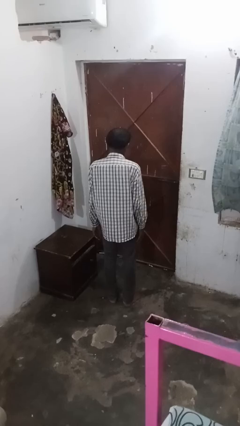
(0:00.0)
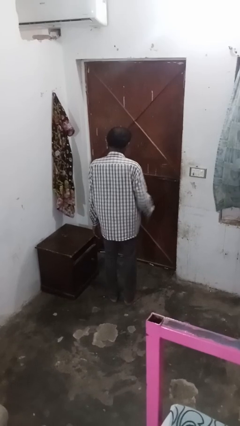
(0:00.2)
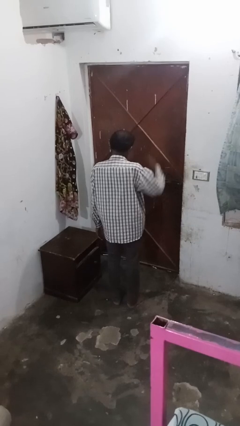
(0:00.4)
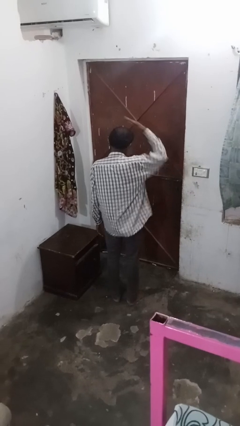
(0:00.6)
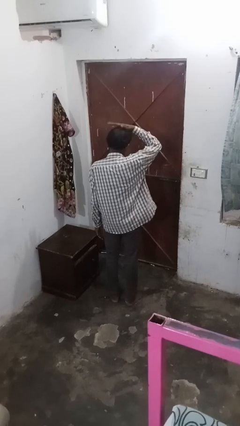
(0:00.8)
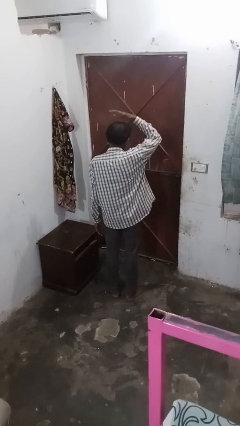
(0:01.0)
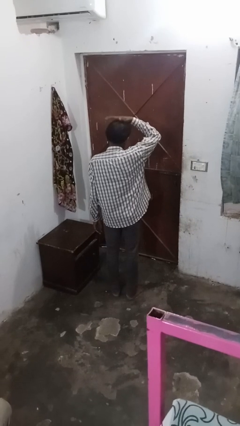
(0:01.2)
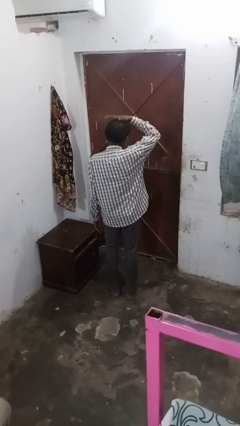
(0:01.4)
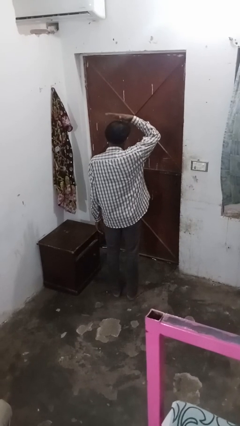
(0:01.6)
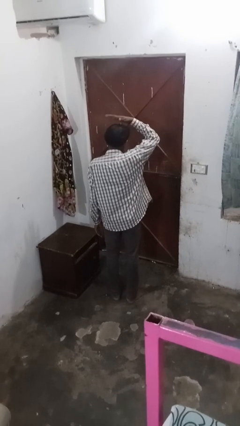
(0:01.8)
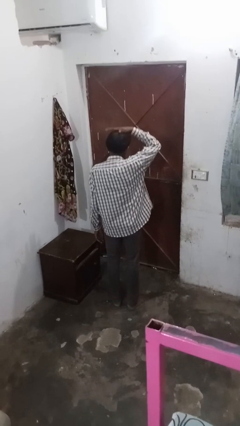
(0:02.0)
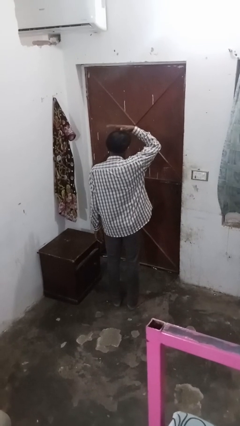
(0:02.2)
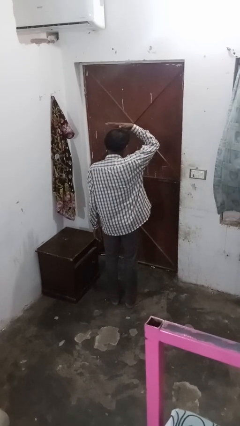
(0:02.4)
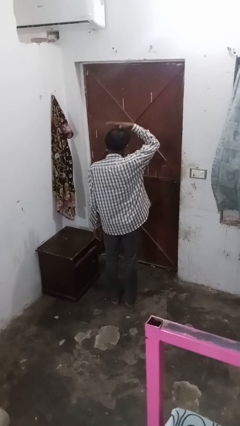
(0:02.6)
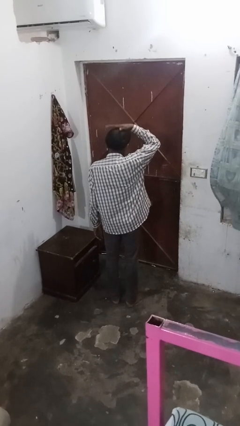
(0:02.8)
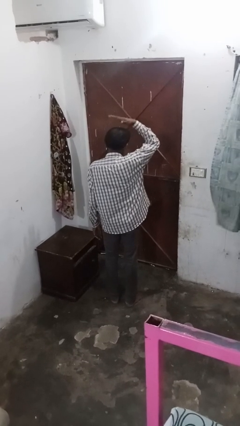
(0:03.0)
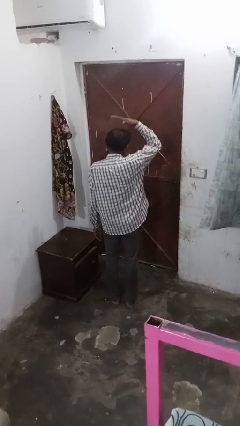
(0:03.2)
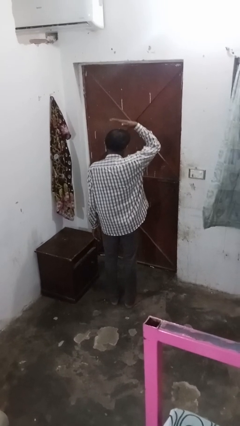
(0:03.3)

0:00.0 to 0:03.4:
person pats head

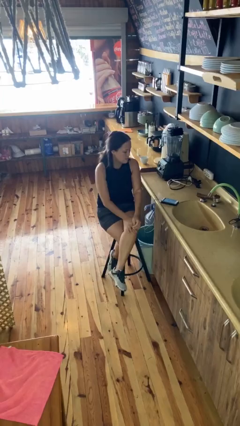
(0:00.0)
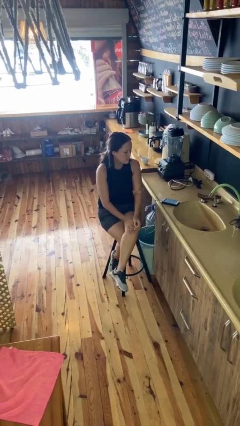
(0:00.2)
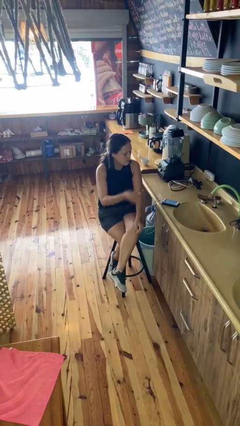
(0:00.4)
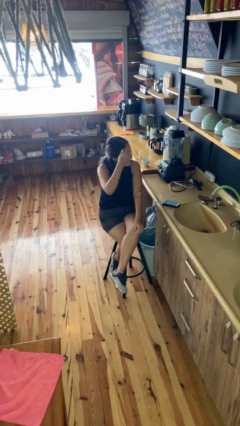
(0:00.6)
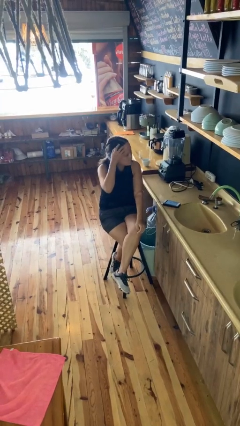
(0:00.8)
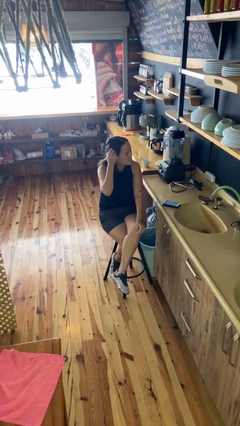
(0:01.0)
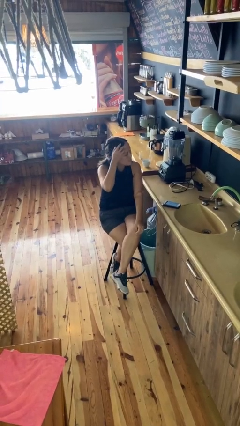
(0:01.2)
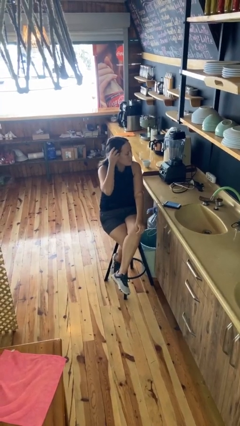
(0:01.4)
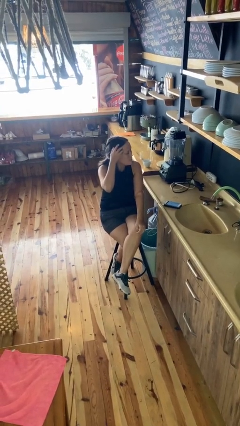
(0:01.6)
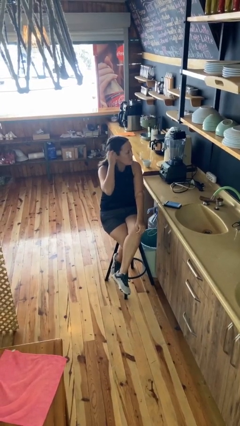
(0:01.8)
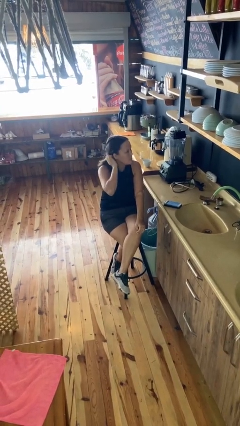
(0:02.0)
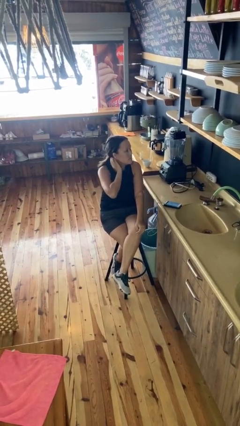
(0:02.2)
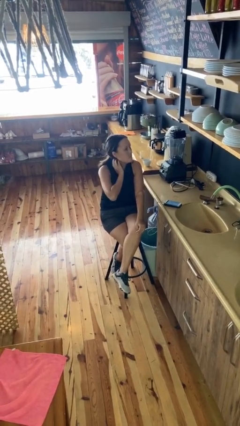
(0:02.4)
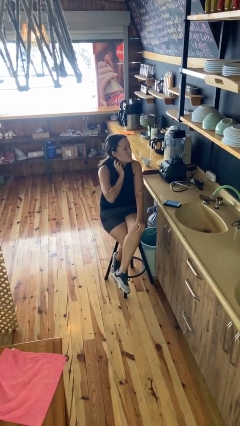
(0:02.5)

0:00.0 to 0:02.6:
person strokes hair

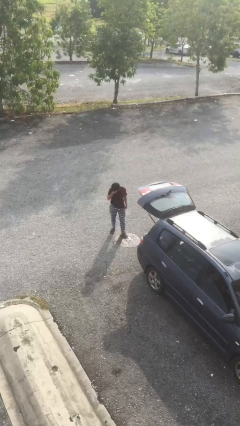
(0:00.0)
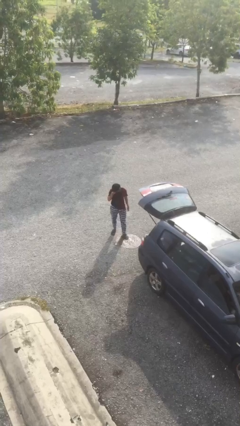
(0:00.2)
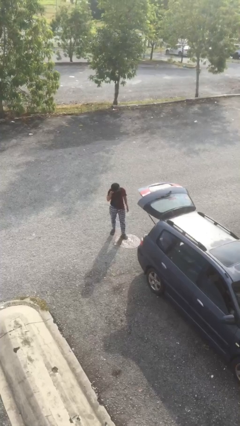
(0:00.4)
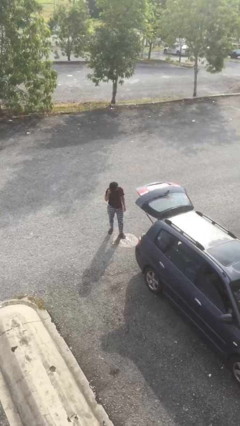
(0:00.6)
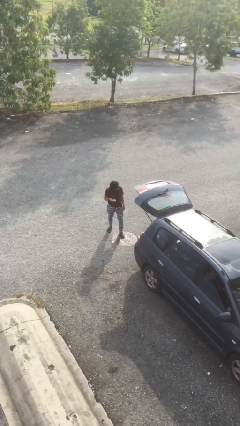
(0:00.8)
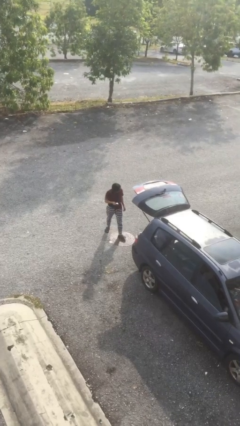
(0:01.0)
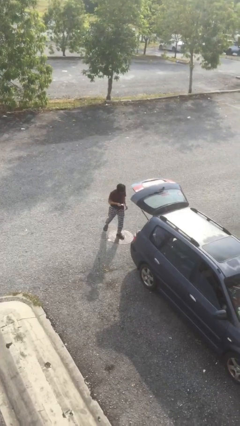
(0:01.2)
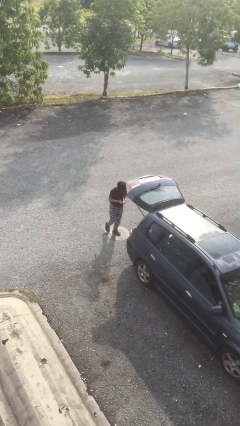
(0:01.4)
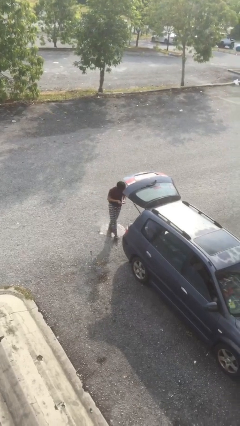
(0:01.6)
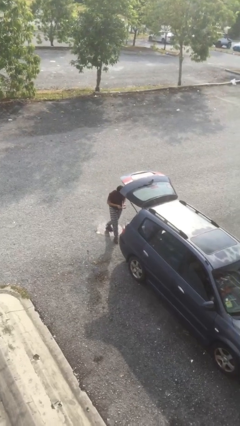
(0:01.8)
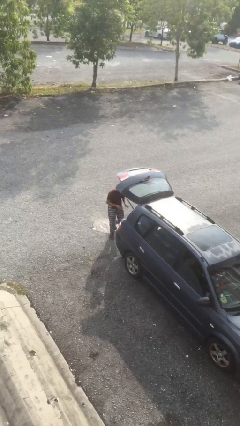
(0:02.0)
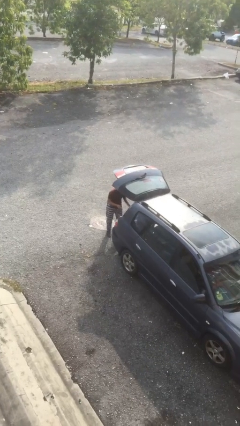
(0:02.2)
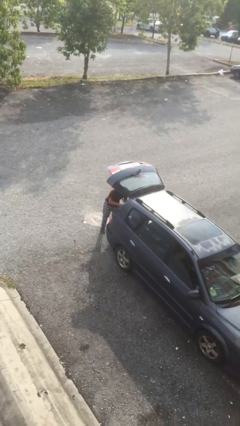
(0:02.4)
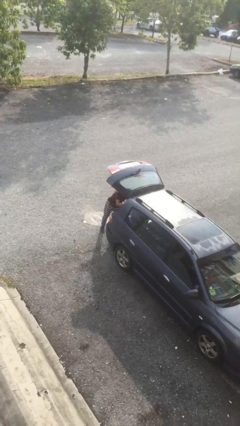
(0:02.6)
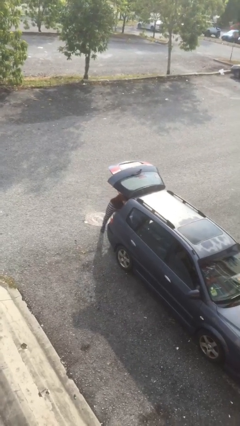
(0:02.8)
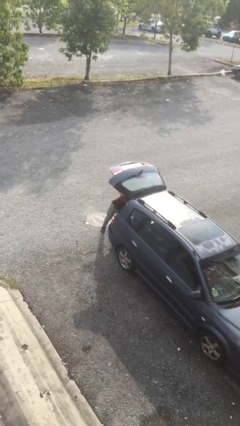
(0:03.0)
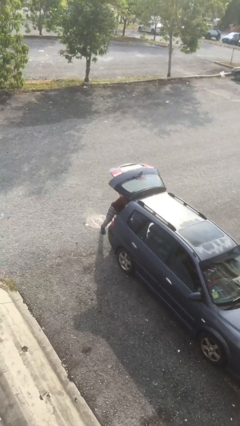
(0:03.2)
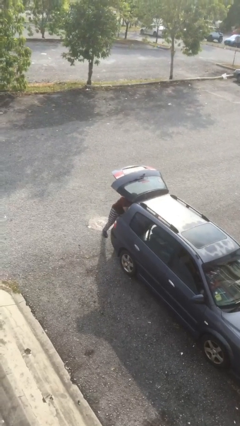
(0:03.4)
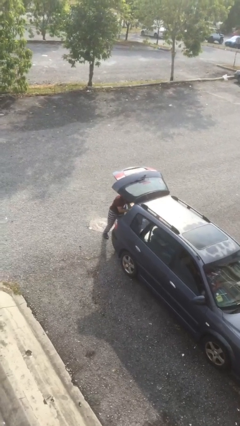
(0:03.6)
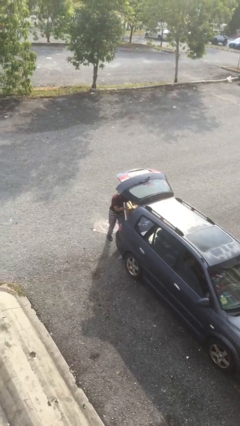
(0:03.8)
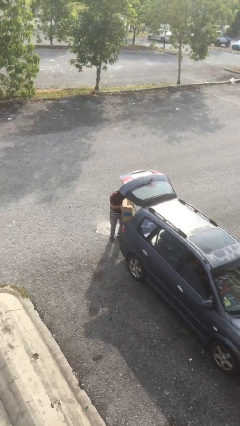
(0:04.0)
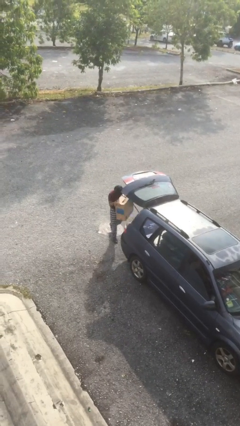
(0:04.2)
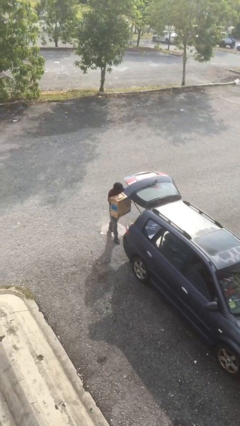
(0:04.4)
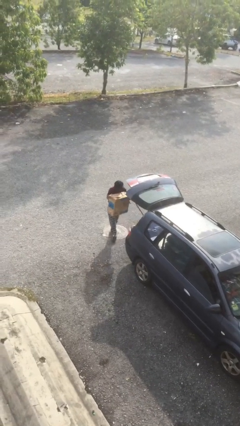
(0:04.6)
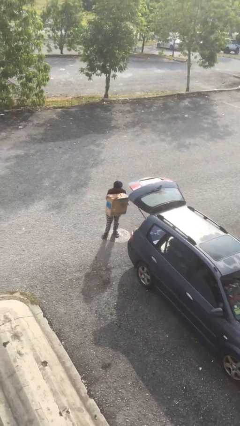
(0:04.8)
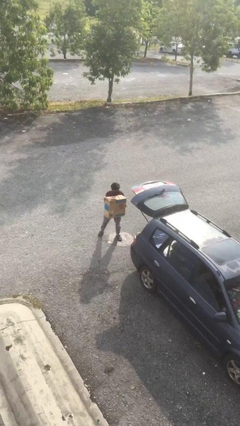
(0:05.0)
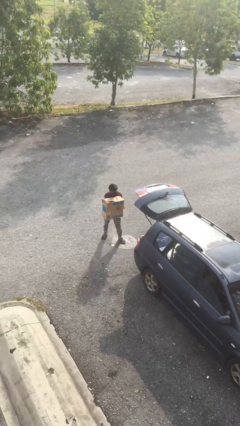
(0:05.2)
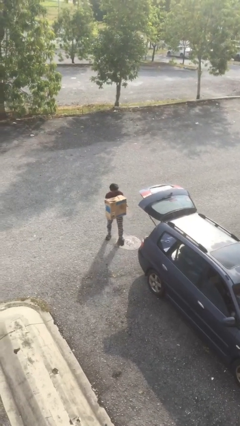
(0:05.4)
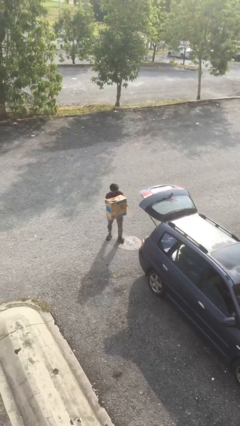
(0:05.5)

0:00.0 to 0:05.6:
person unloads car

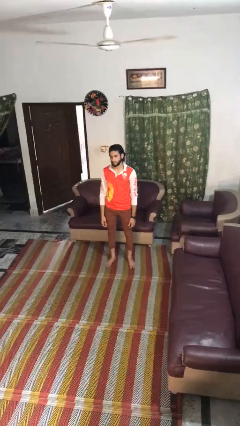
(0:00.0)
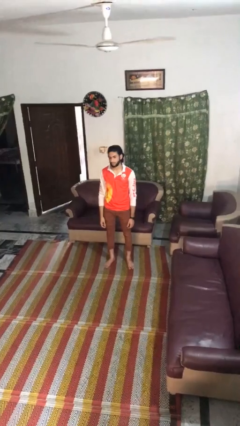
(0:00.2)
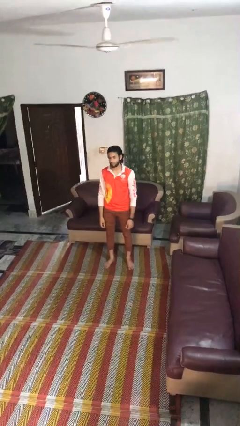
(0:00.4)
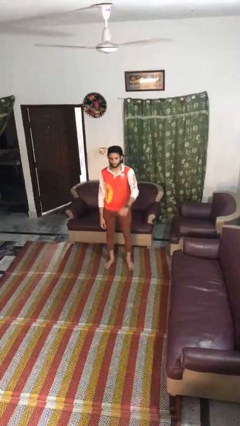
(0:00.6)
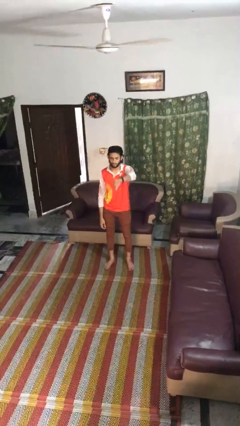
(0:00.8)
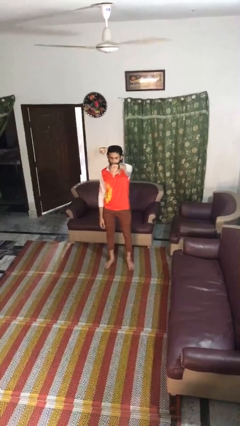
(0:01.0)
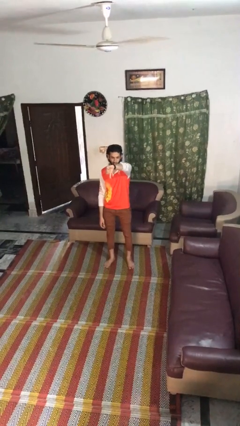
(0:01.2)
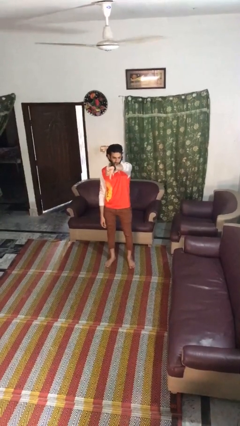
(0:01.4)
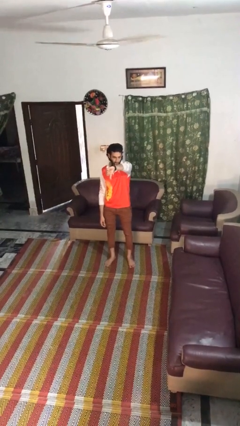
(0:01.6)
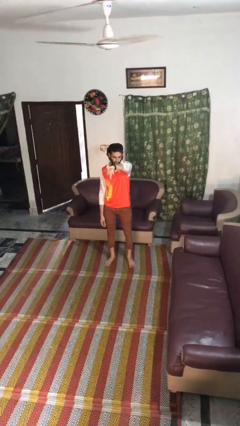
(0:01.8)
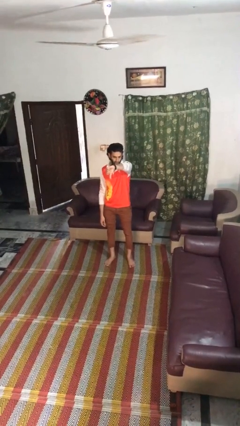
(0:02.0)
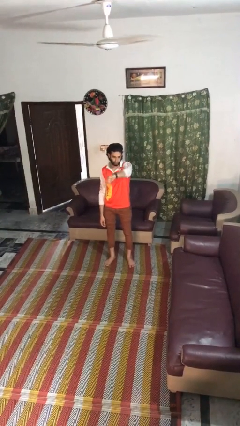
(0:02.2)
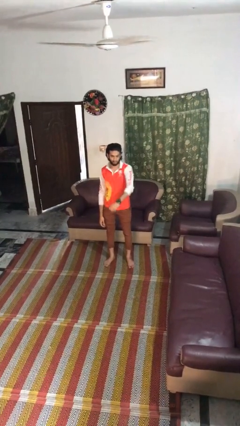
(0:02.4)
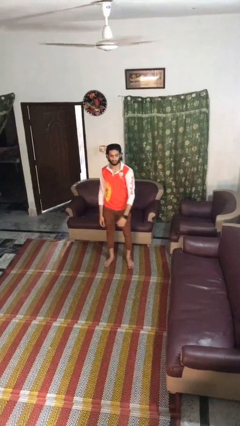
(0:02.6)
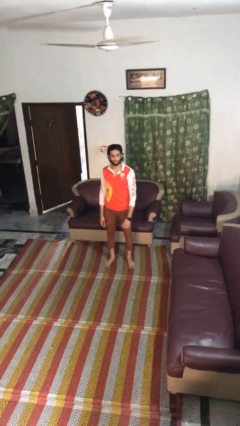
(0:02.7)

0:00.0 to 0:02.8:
person gestures thumbs down

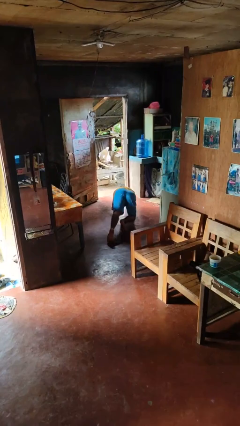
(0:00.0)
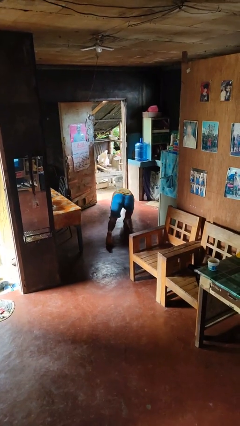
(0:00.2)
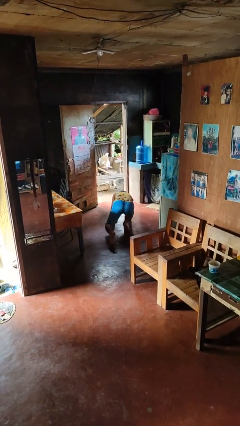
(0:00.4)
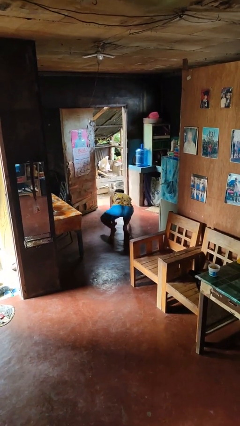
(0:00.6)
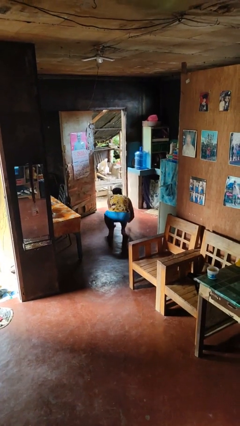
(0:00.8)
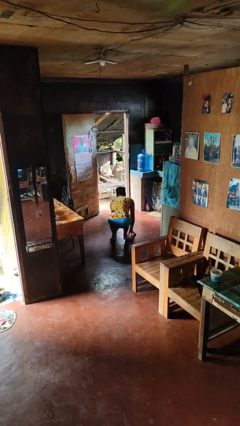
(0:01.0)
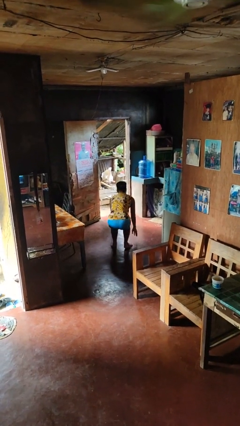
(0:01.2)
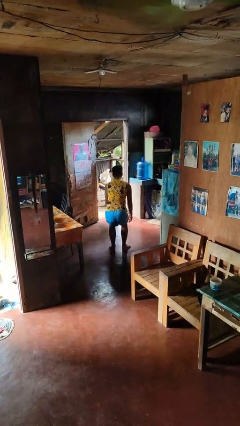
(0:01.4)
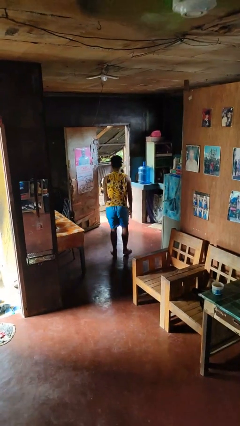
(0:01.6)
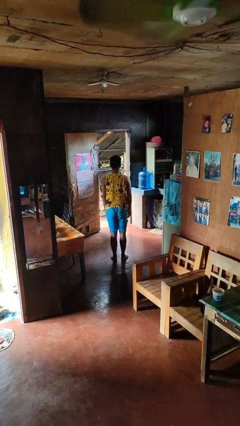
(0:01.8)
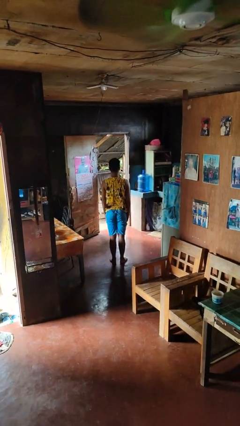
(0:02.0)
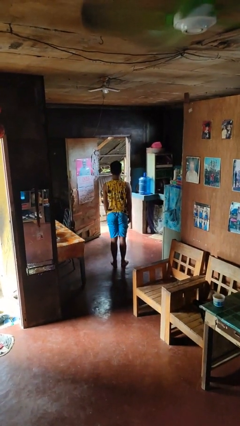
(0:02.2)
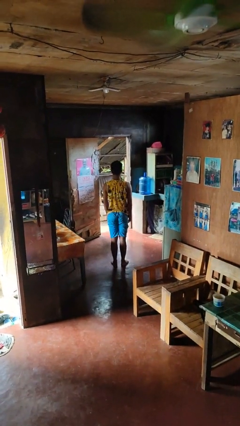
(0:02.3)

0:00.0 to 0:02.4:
person stands up from floor

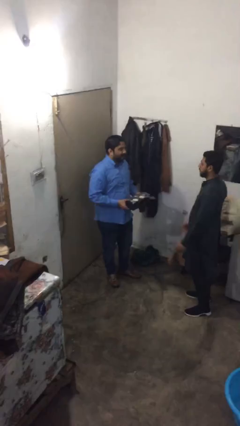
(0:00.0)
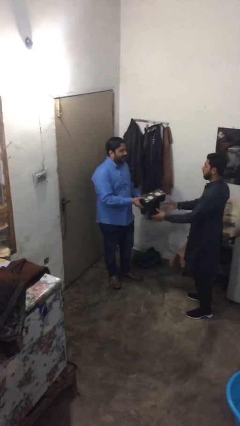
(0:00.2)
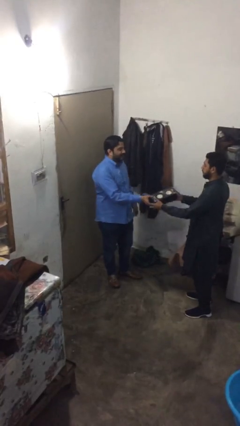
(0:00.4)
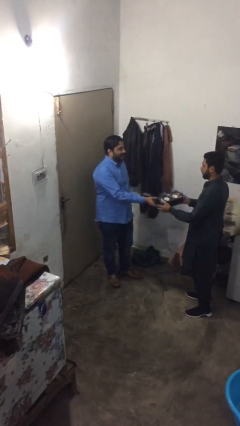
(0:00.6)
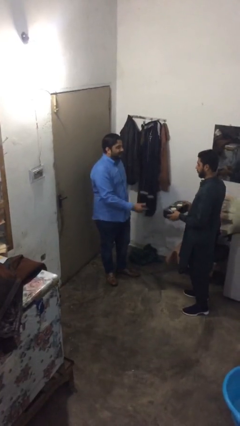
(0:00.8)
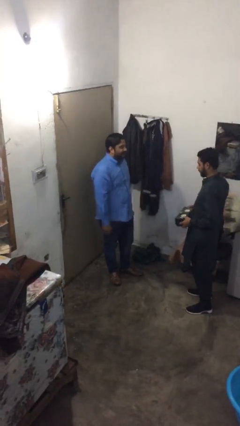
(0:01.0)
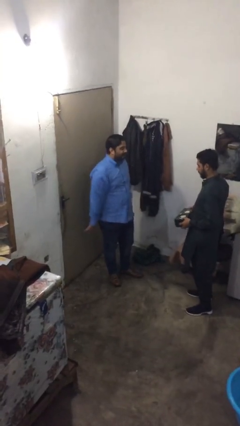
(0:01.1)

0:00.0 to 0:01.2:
person transfers object to person
